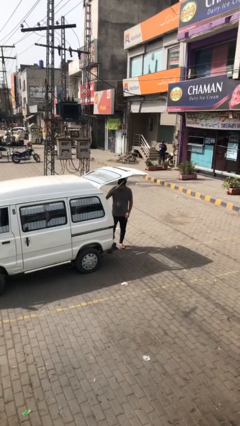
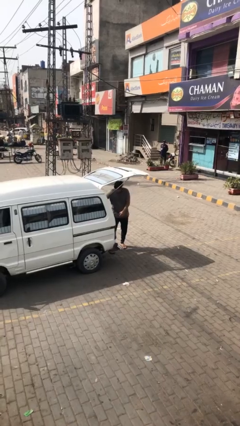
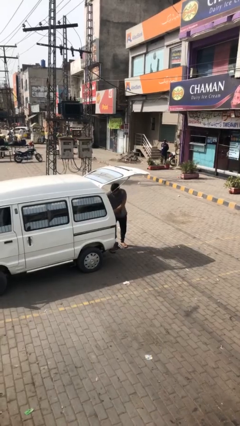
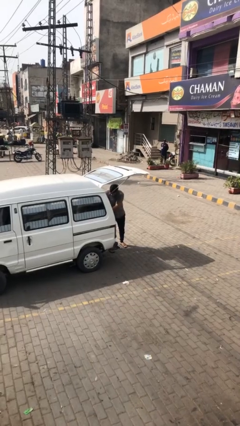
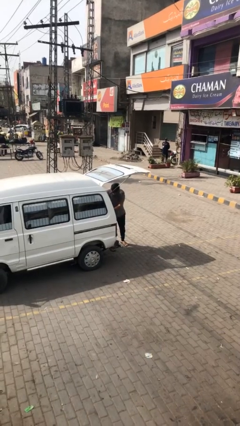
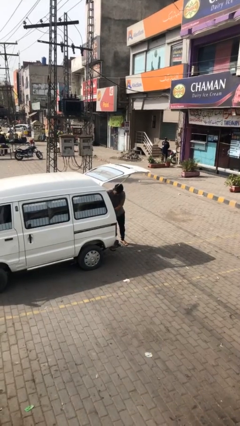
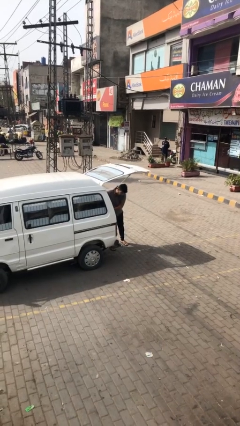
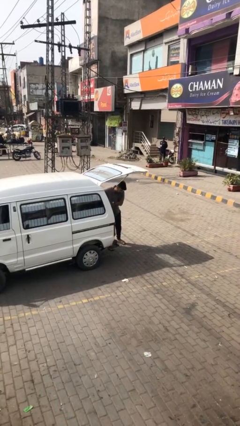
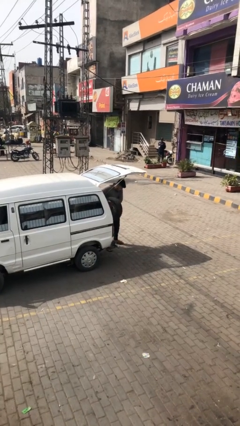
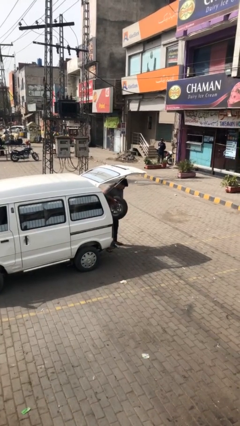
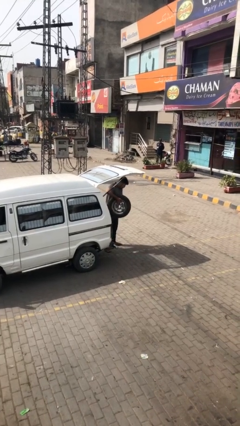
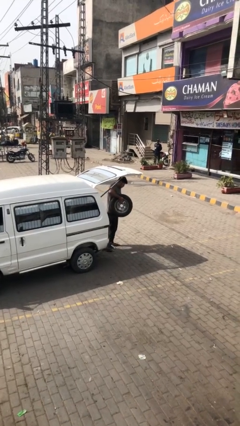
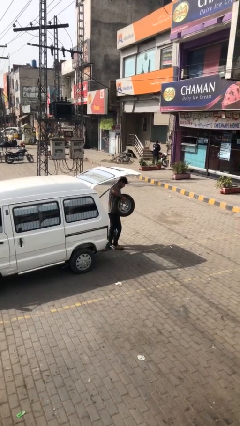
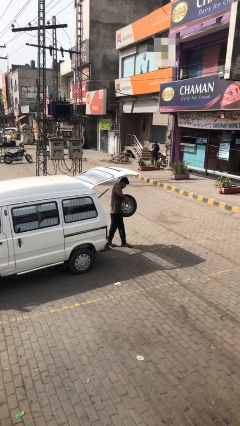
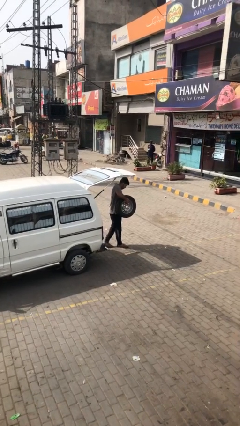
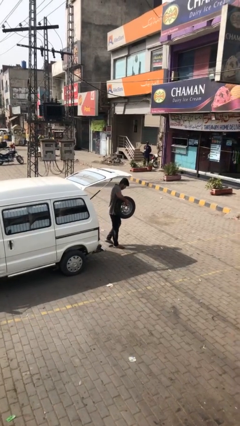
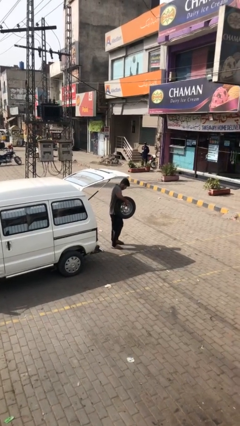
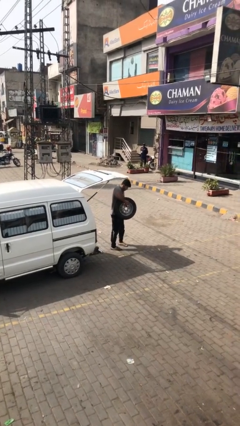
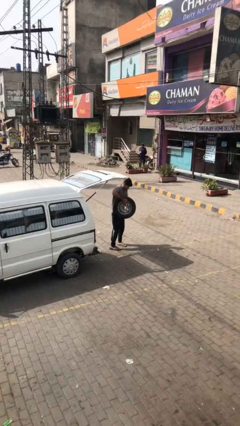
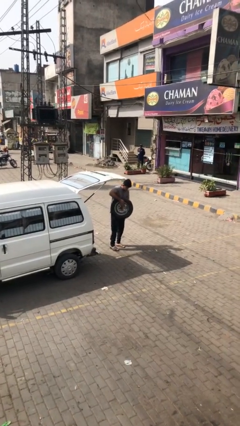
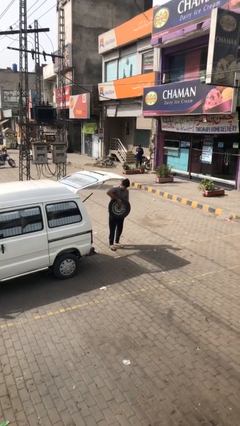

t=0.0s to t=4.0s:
person unloads car

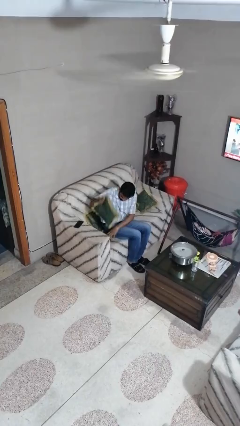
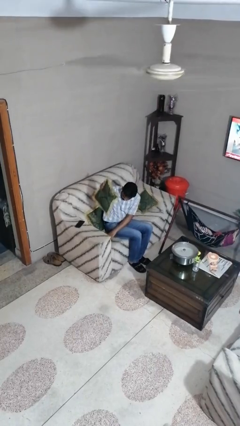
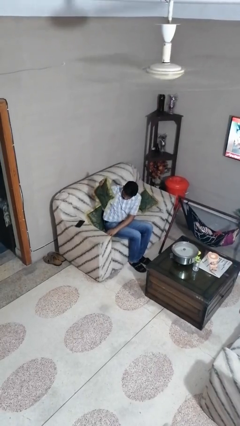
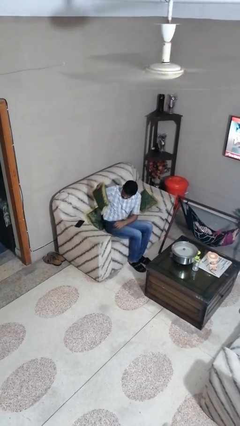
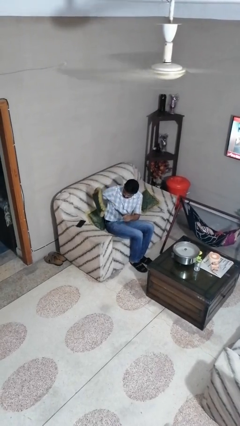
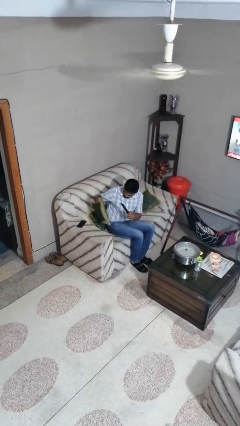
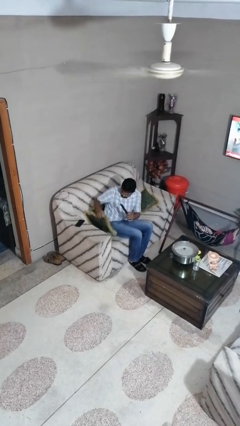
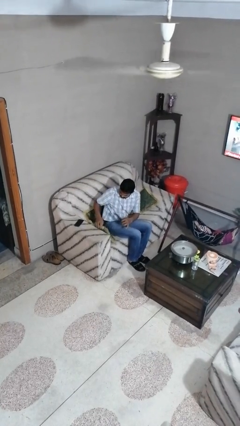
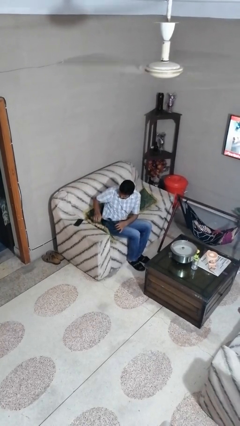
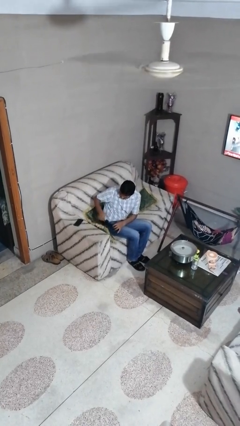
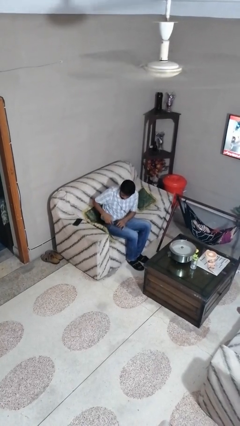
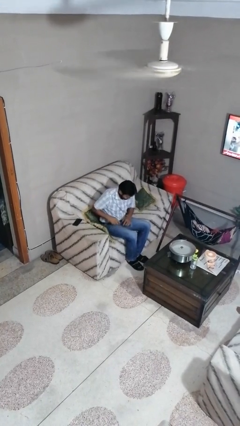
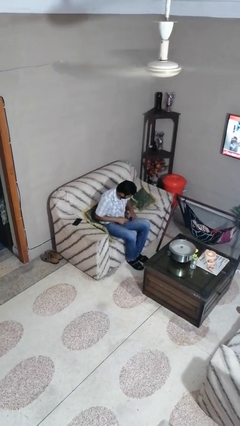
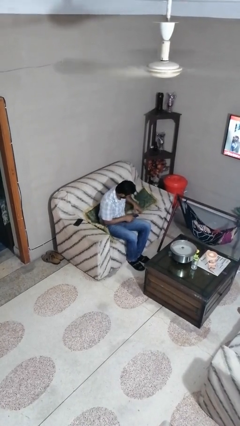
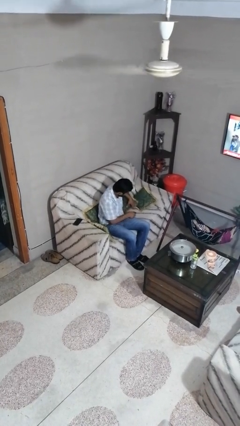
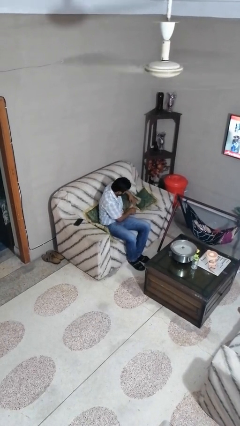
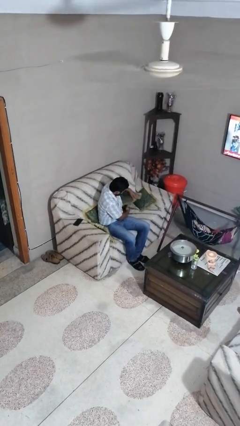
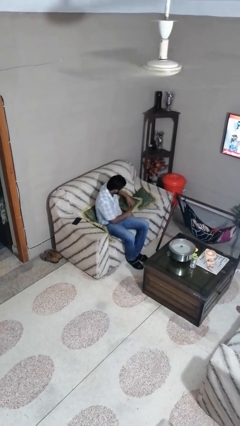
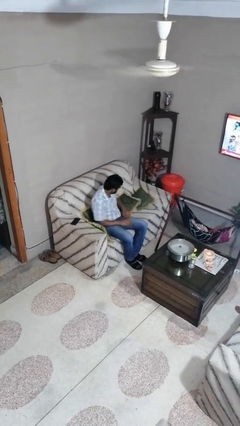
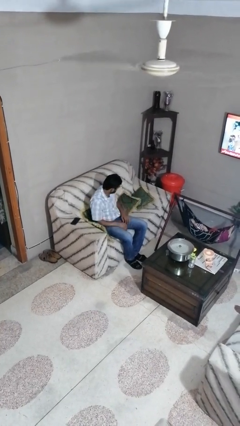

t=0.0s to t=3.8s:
person searches in couch

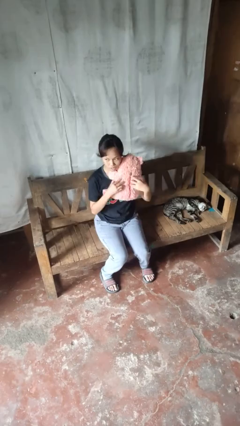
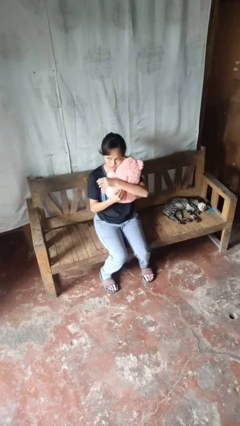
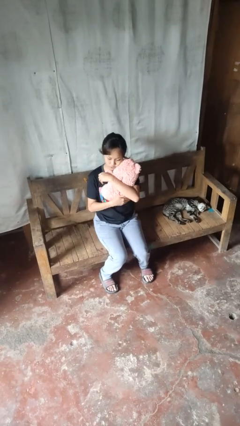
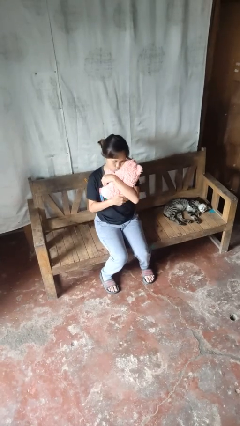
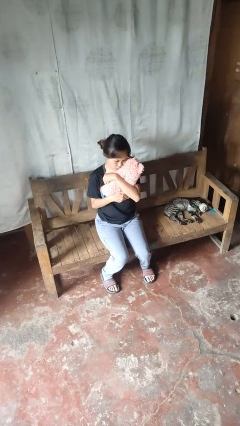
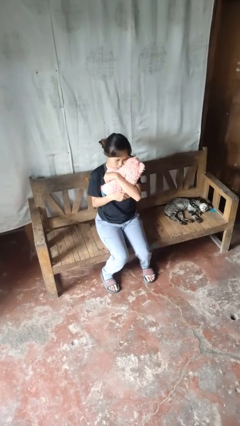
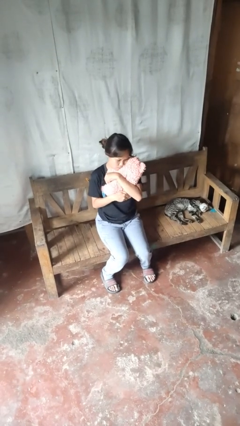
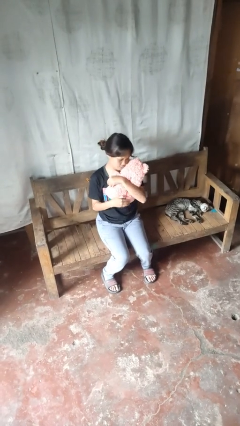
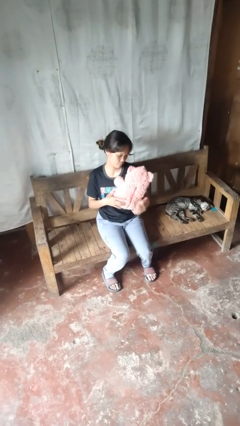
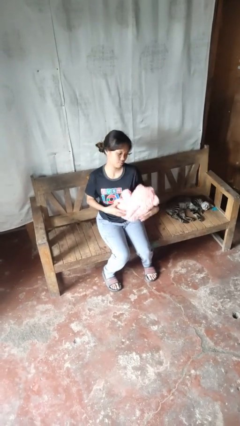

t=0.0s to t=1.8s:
person hugs stuffed animal

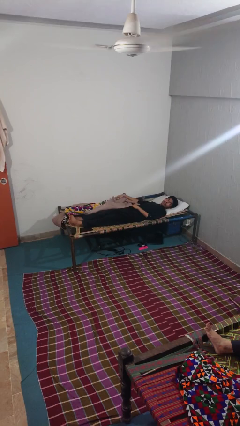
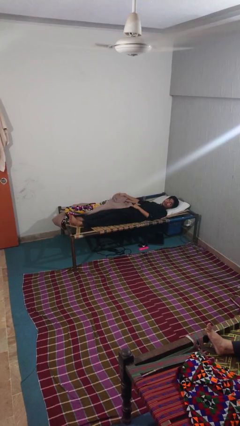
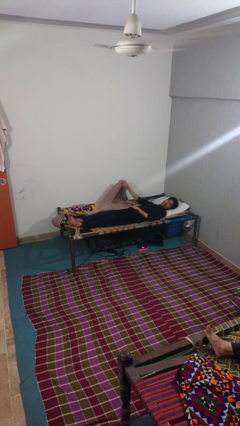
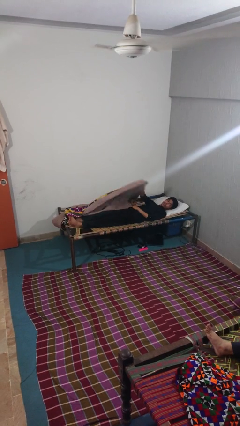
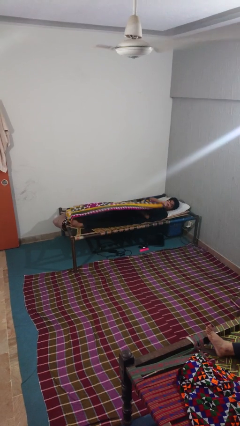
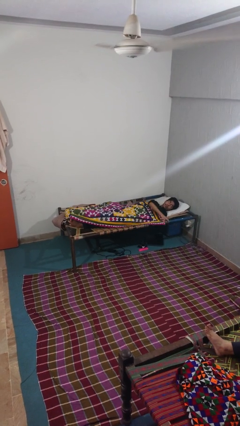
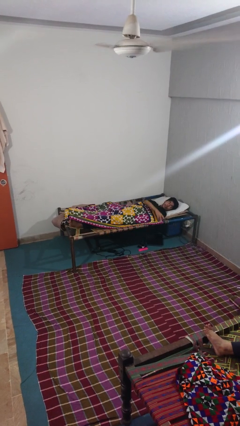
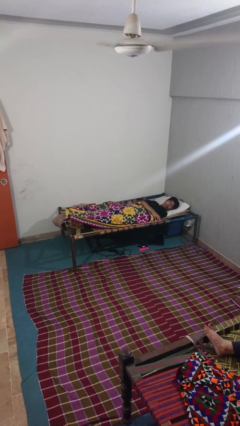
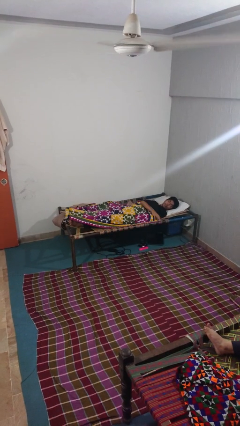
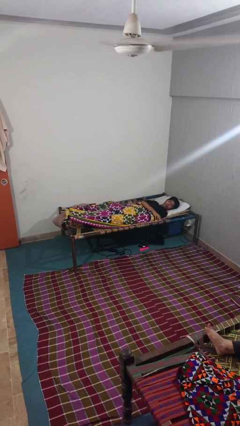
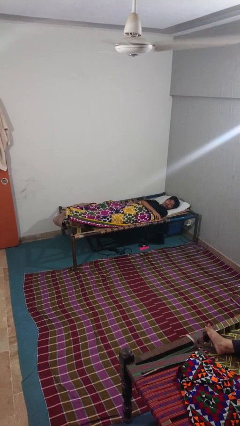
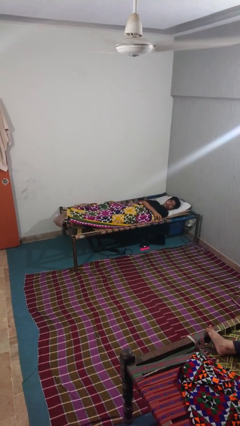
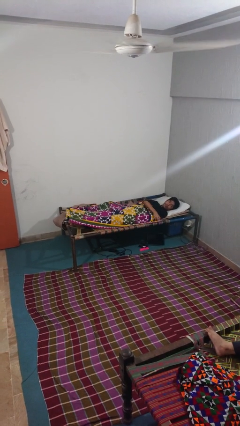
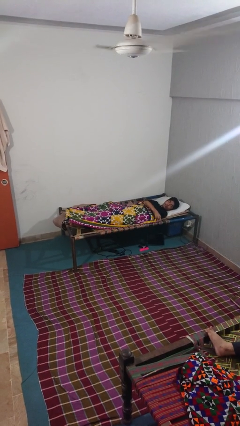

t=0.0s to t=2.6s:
person covers with bedsheets

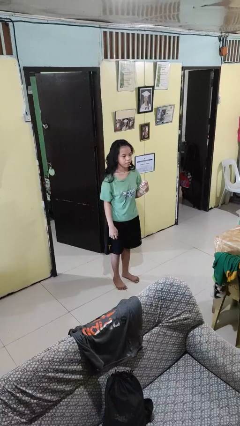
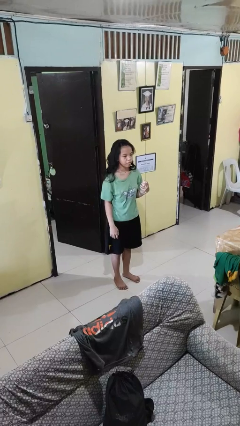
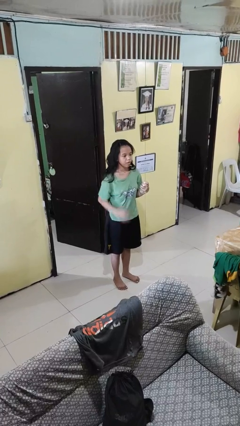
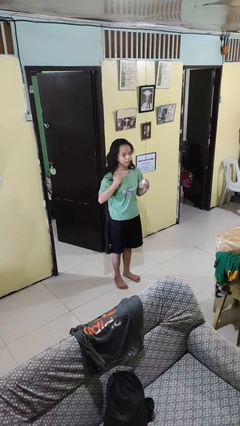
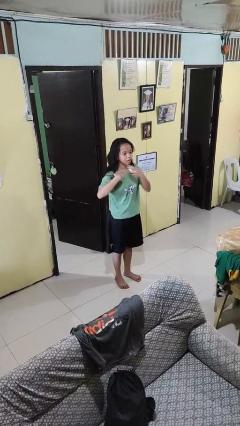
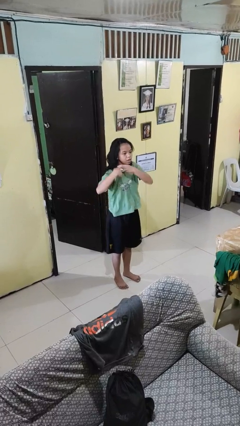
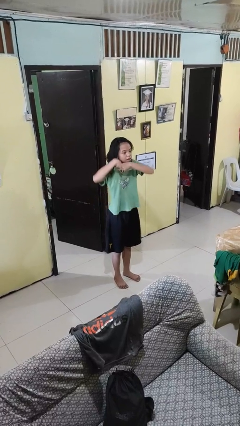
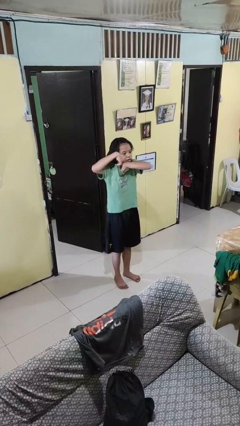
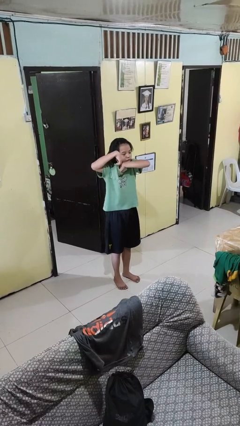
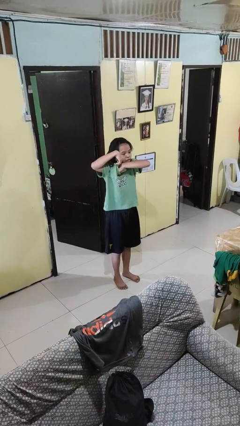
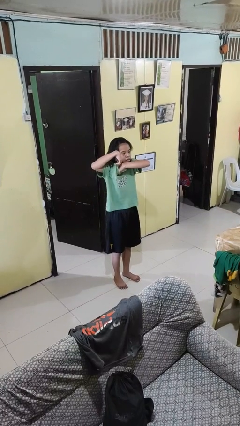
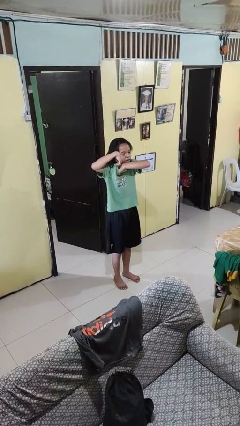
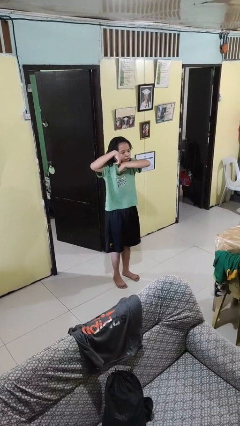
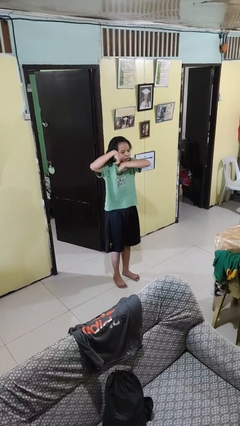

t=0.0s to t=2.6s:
person applies deodorant

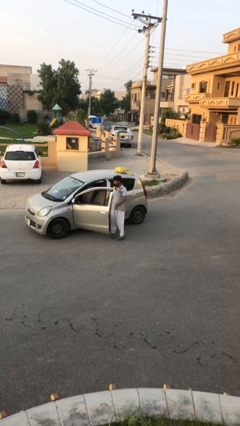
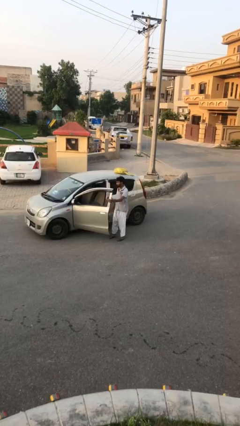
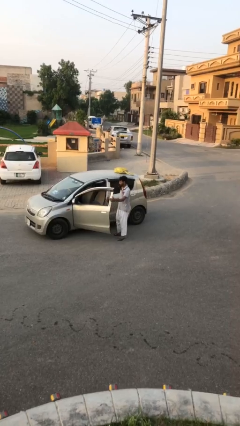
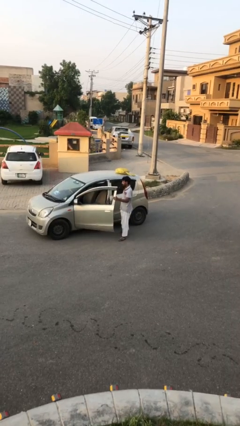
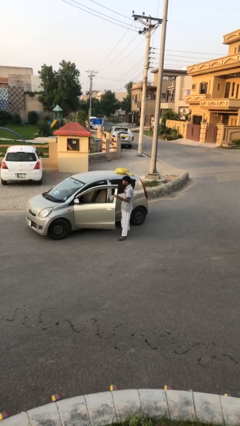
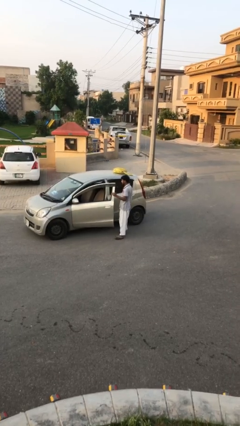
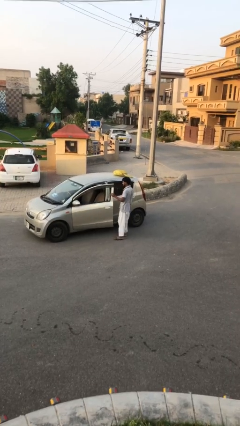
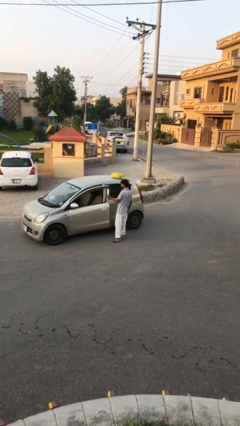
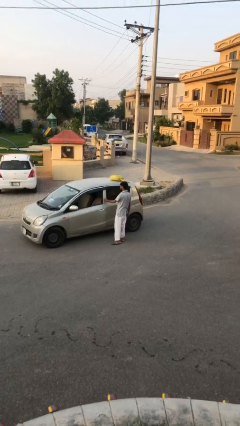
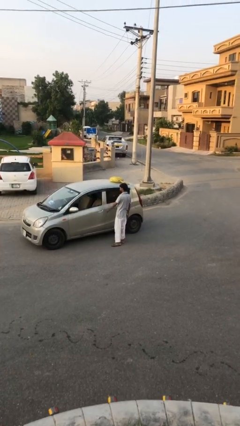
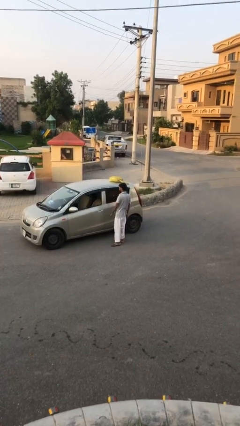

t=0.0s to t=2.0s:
person closes car door

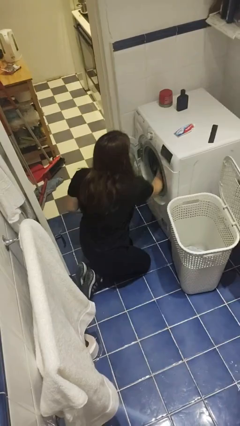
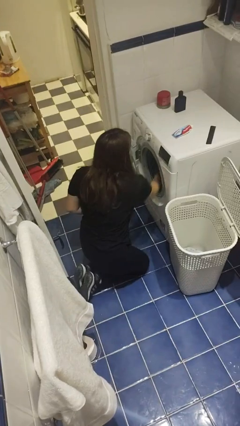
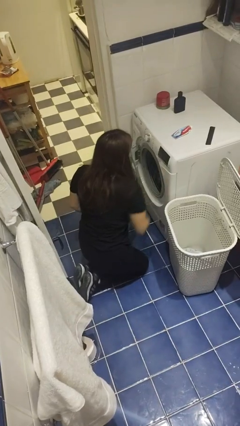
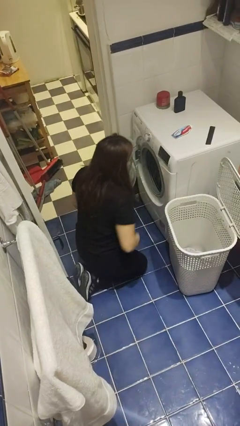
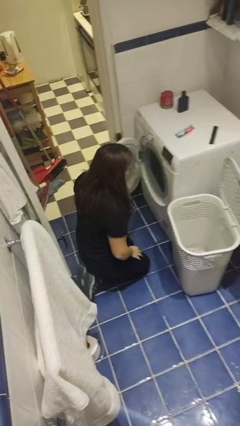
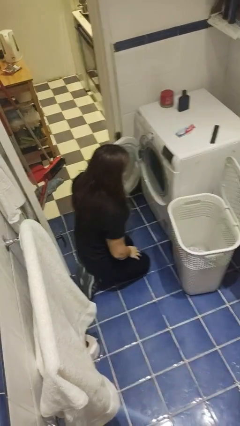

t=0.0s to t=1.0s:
person loads clotheswasher
